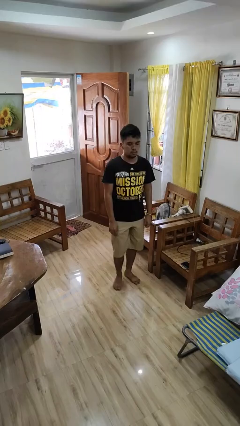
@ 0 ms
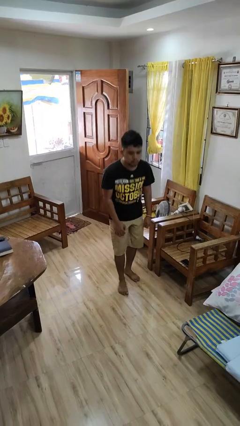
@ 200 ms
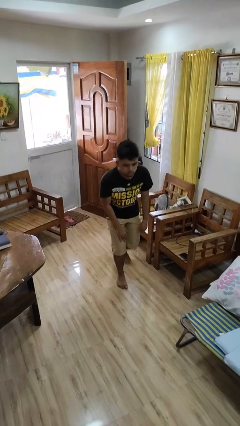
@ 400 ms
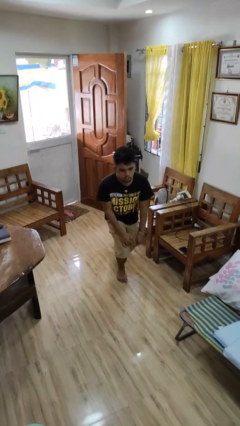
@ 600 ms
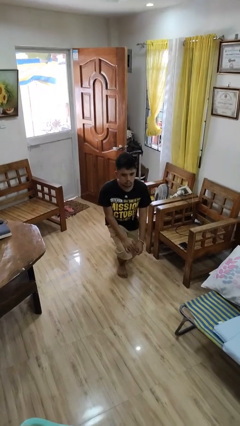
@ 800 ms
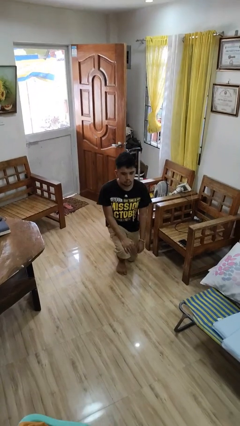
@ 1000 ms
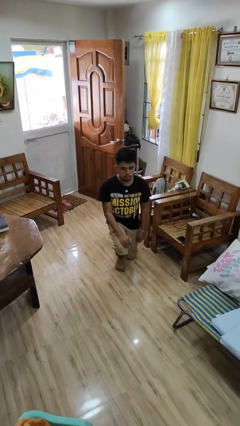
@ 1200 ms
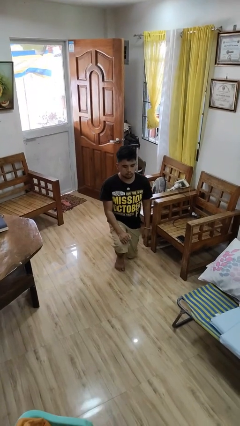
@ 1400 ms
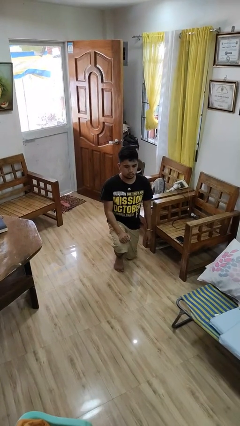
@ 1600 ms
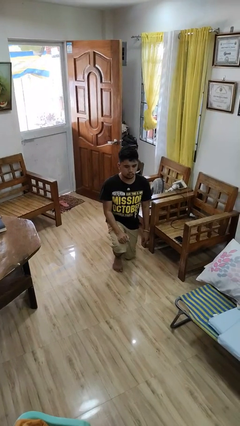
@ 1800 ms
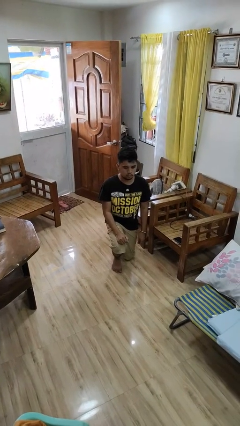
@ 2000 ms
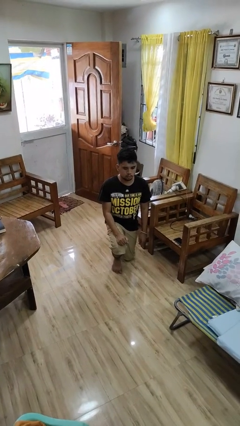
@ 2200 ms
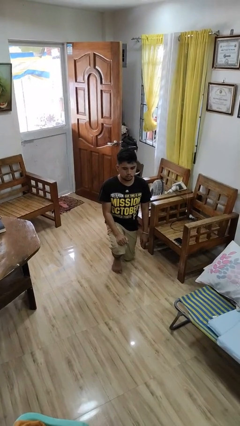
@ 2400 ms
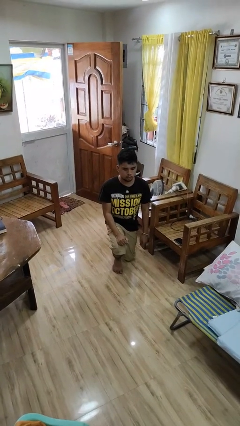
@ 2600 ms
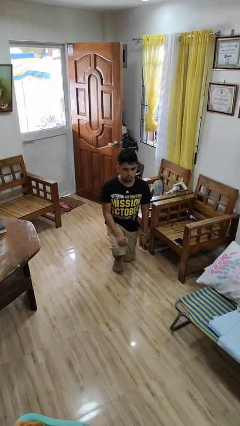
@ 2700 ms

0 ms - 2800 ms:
person kneels

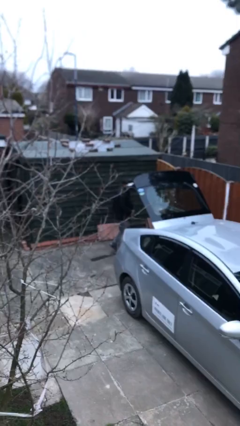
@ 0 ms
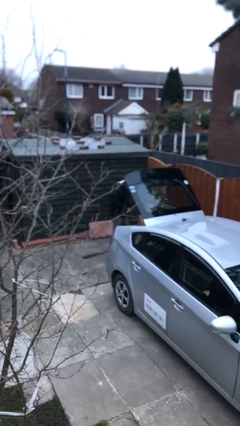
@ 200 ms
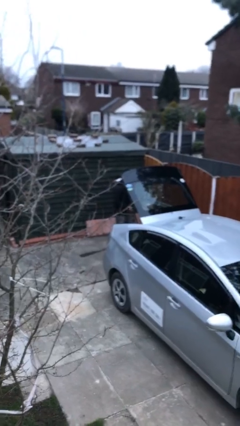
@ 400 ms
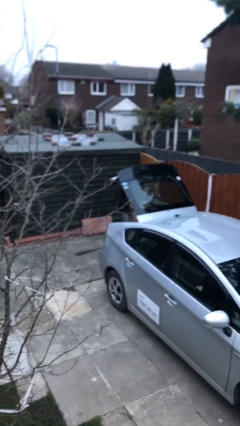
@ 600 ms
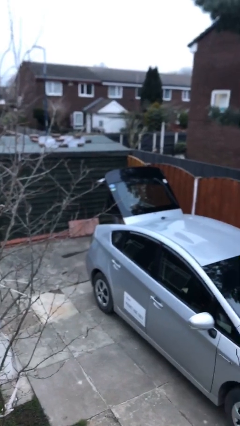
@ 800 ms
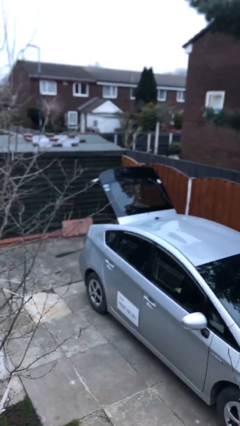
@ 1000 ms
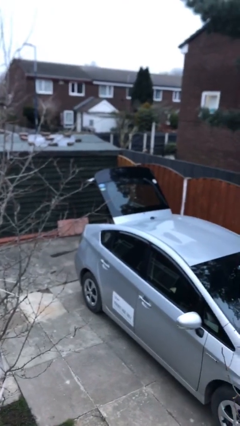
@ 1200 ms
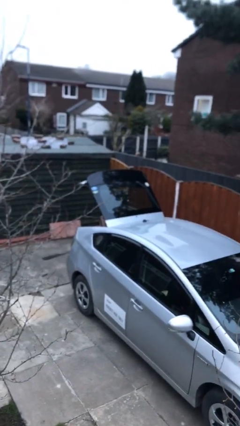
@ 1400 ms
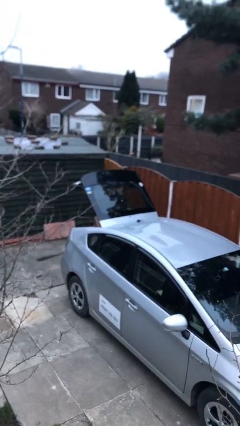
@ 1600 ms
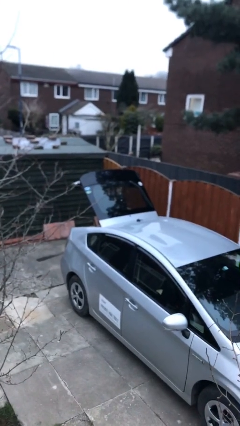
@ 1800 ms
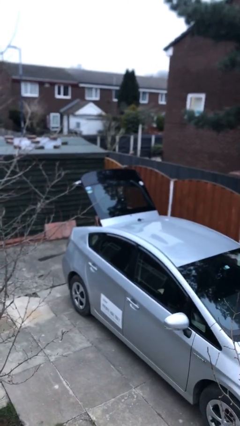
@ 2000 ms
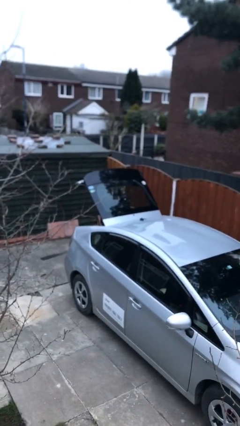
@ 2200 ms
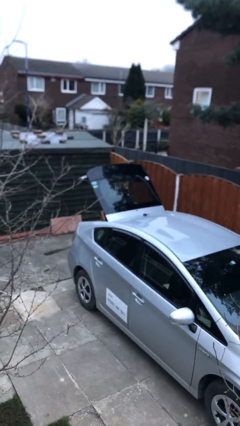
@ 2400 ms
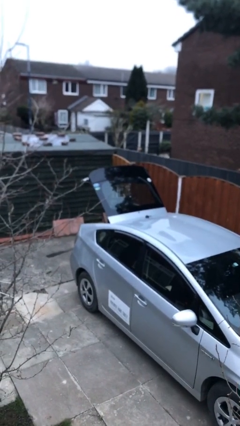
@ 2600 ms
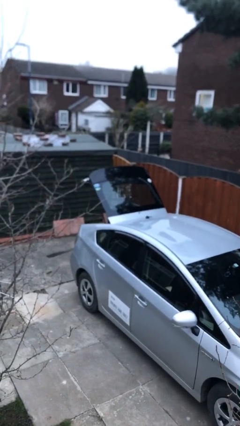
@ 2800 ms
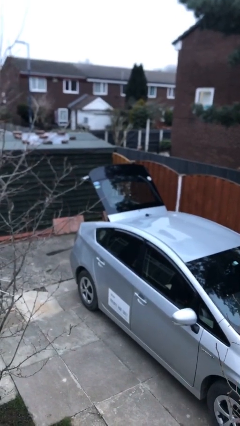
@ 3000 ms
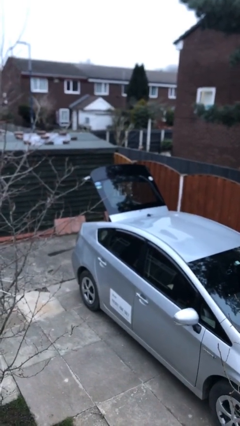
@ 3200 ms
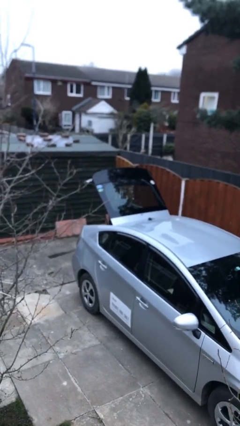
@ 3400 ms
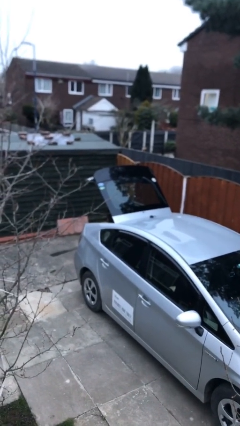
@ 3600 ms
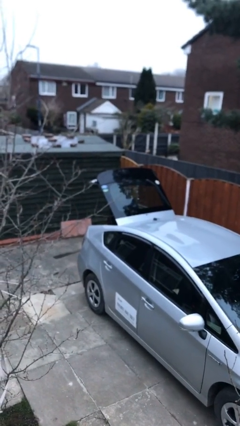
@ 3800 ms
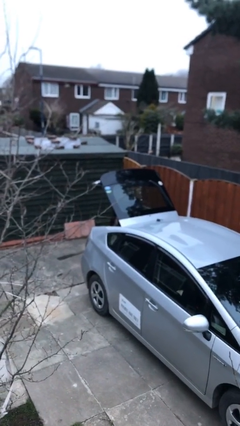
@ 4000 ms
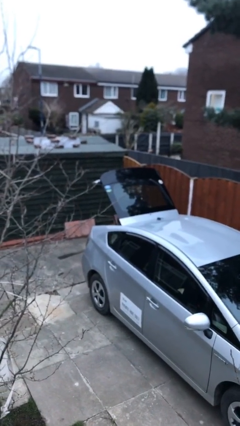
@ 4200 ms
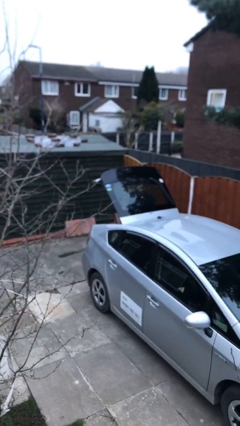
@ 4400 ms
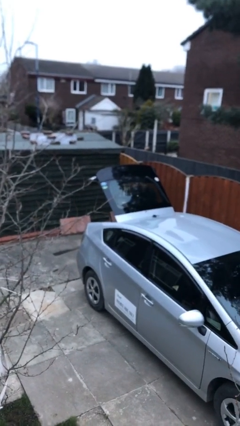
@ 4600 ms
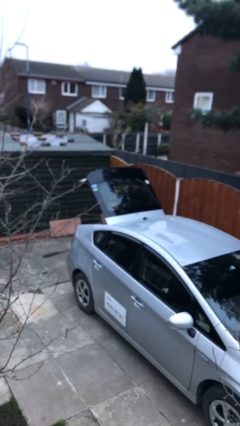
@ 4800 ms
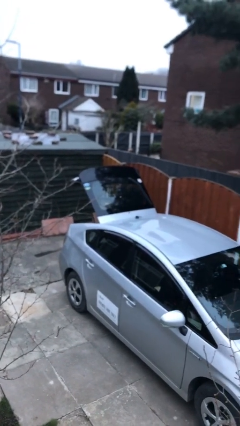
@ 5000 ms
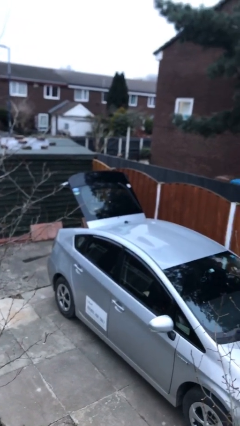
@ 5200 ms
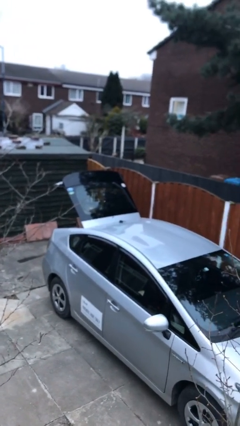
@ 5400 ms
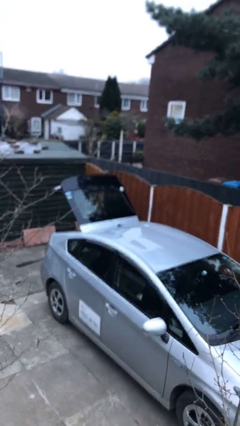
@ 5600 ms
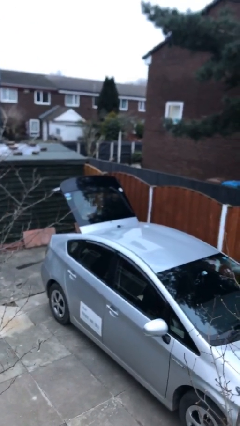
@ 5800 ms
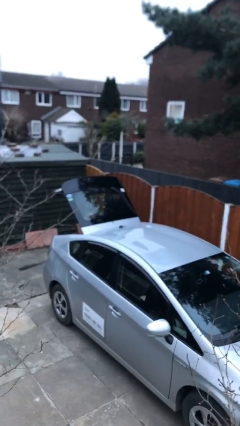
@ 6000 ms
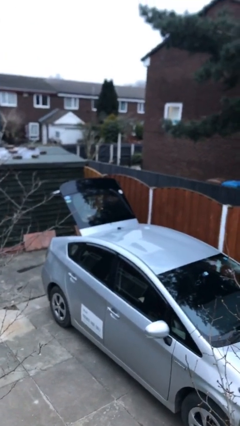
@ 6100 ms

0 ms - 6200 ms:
person loads car

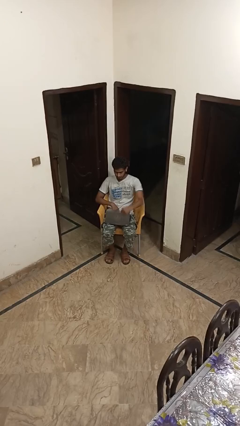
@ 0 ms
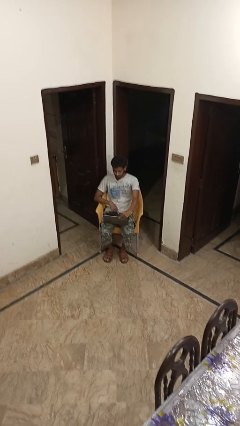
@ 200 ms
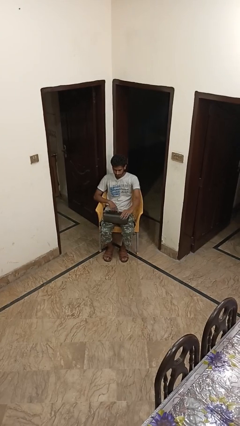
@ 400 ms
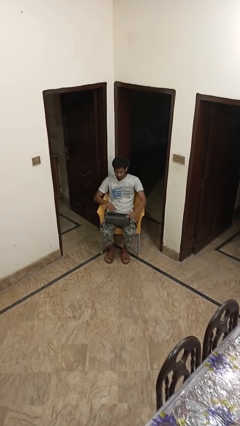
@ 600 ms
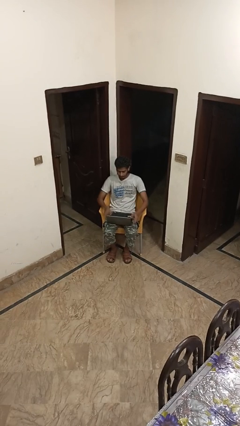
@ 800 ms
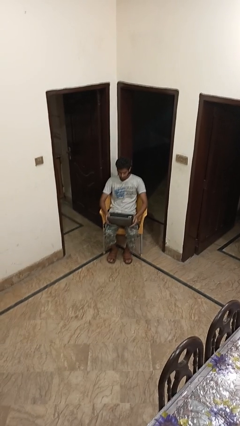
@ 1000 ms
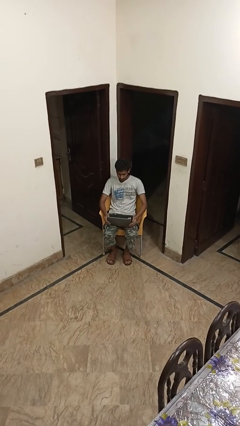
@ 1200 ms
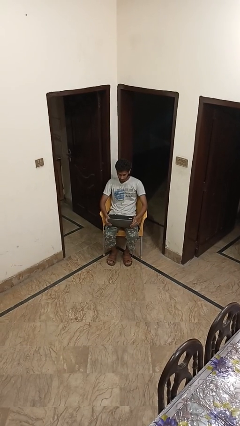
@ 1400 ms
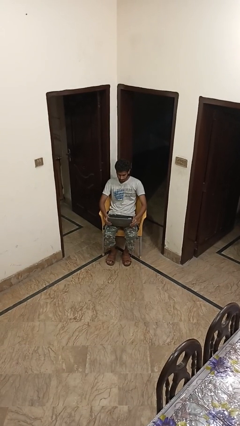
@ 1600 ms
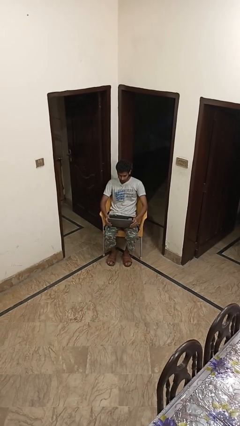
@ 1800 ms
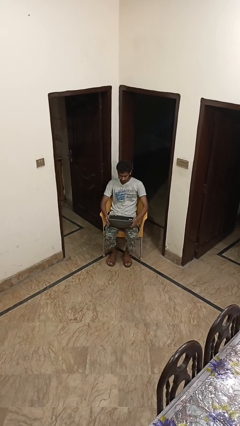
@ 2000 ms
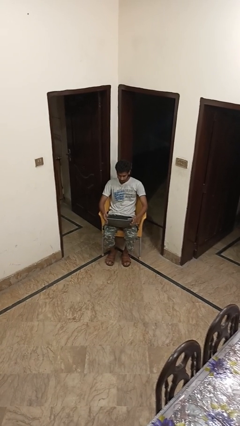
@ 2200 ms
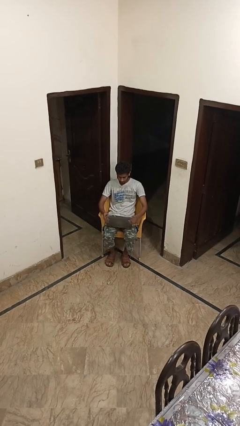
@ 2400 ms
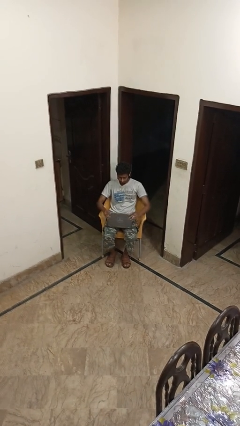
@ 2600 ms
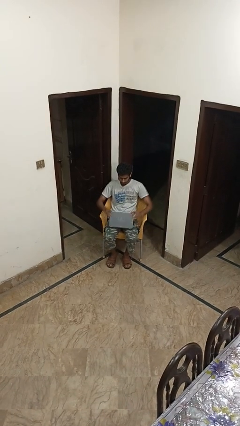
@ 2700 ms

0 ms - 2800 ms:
person opens laptop

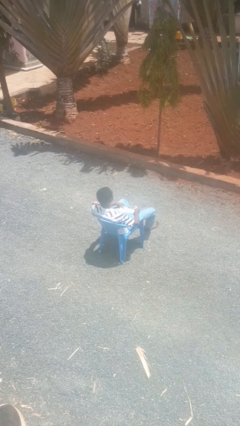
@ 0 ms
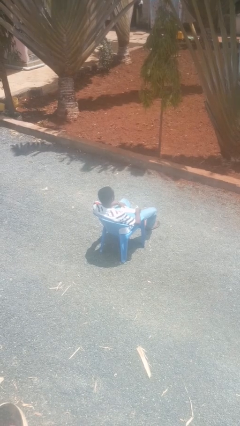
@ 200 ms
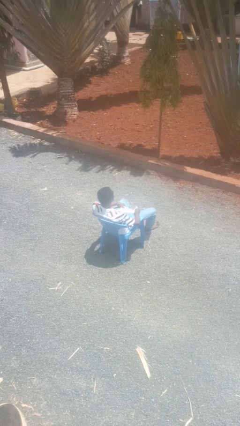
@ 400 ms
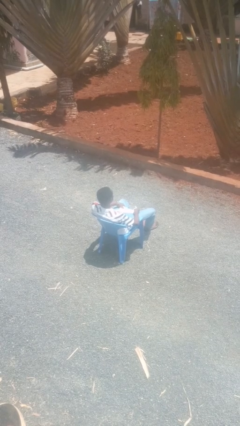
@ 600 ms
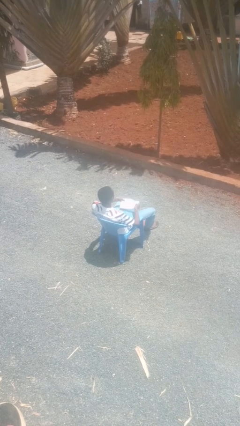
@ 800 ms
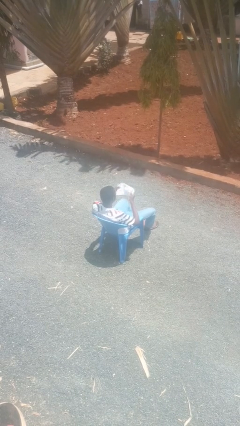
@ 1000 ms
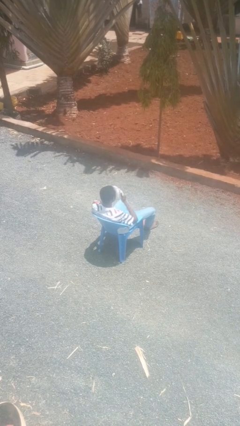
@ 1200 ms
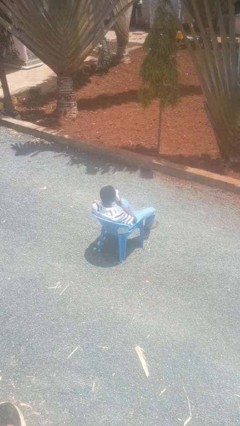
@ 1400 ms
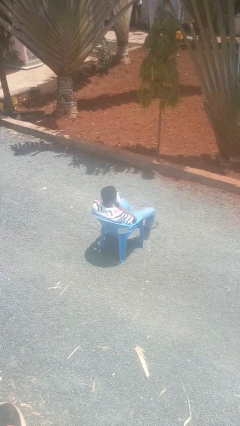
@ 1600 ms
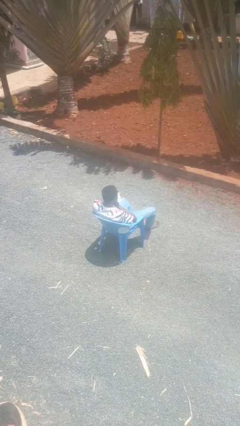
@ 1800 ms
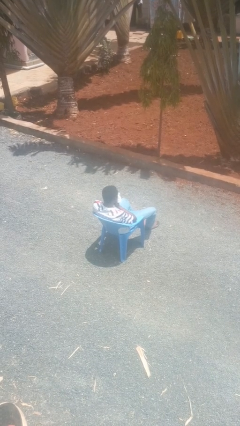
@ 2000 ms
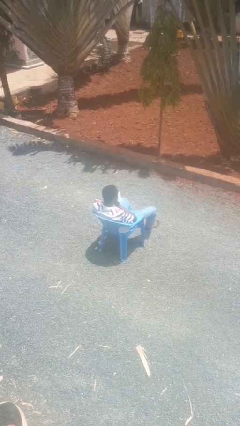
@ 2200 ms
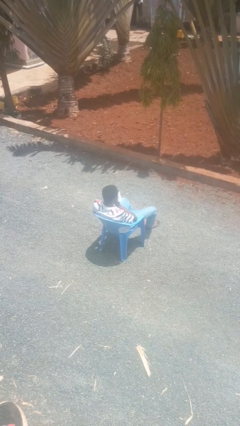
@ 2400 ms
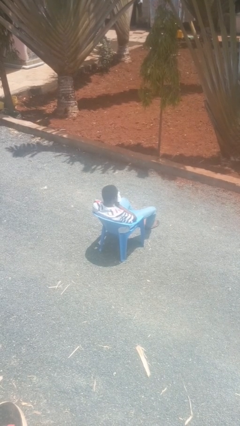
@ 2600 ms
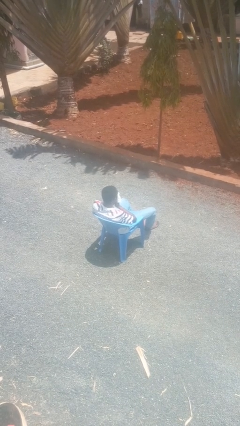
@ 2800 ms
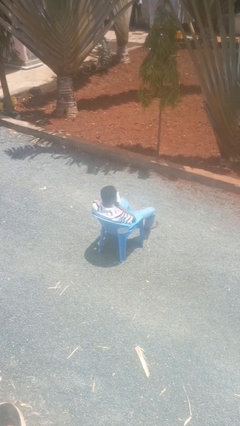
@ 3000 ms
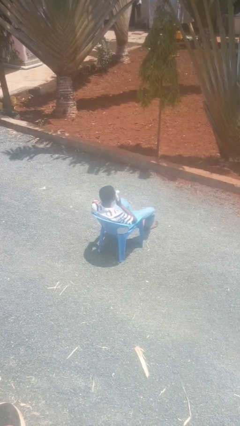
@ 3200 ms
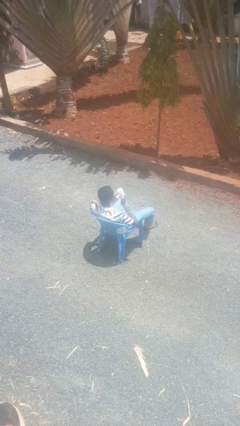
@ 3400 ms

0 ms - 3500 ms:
person blows nose

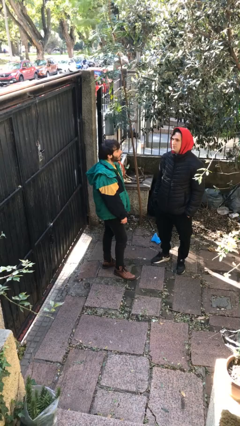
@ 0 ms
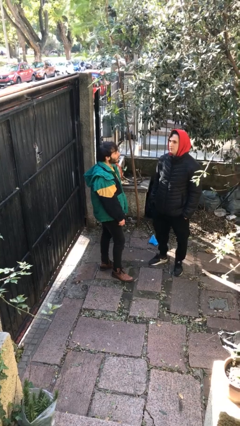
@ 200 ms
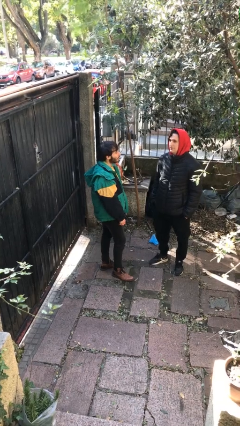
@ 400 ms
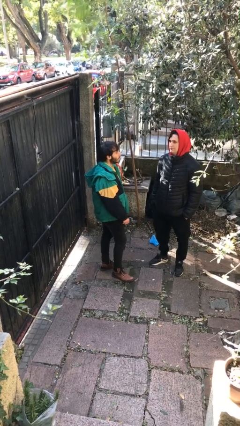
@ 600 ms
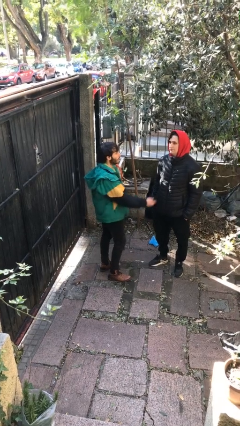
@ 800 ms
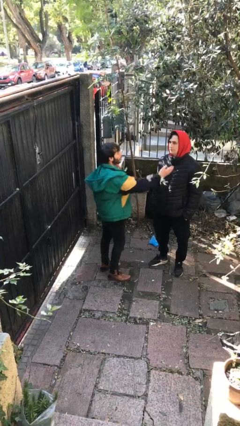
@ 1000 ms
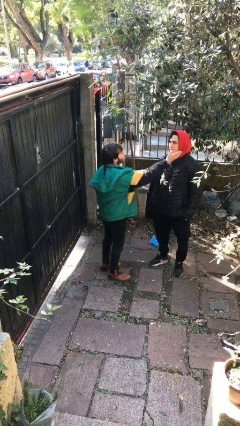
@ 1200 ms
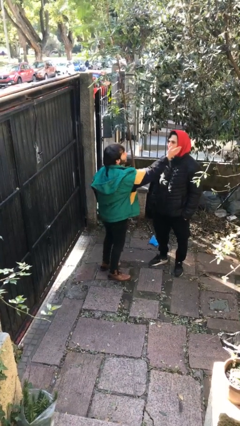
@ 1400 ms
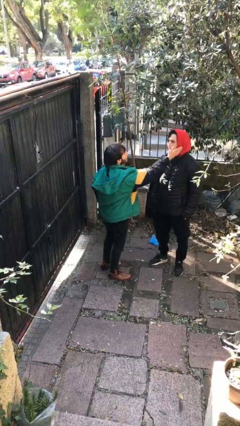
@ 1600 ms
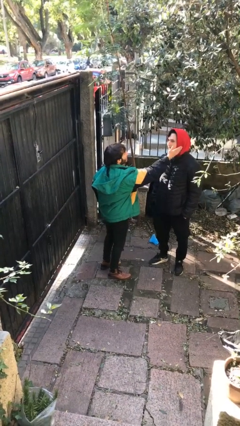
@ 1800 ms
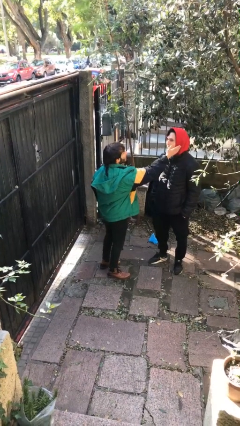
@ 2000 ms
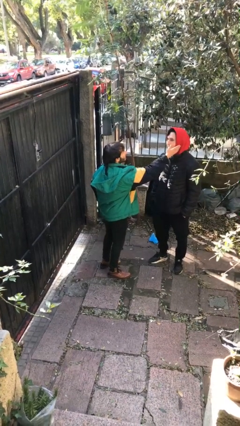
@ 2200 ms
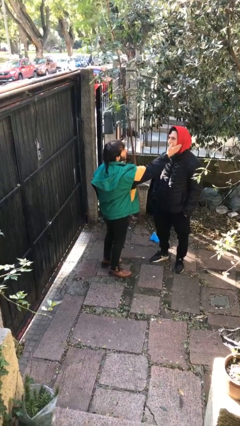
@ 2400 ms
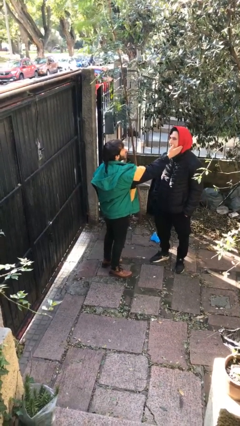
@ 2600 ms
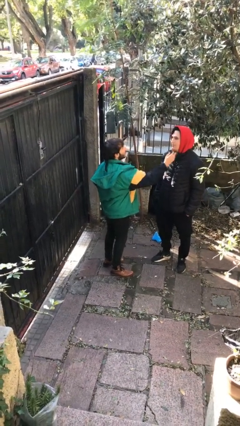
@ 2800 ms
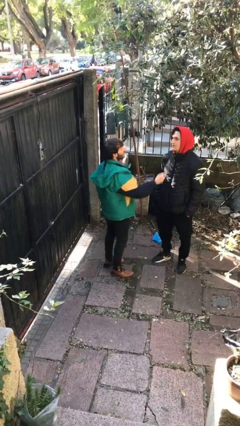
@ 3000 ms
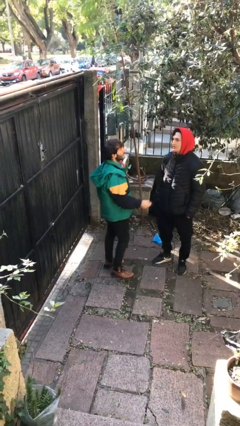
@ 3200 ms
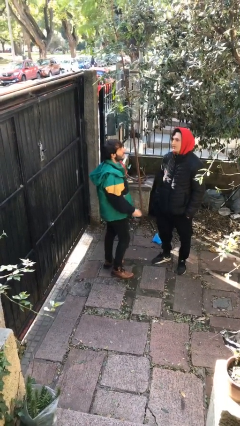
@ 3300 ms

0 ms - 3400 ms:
person touches face of person
